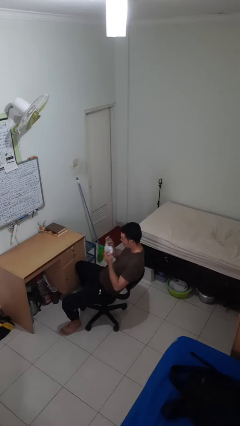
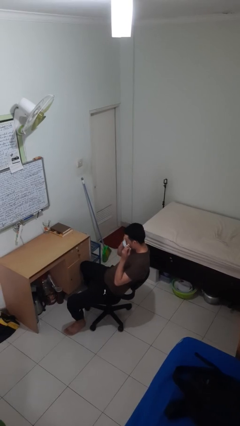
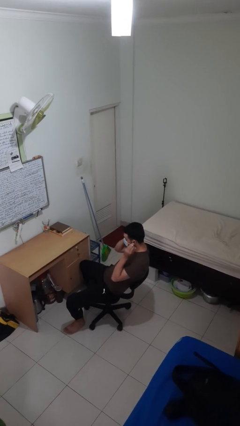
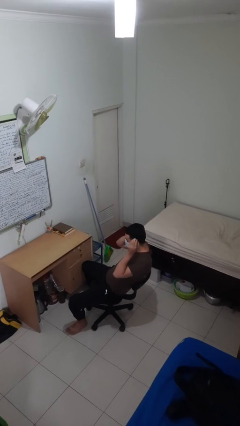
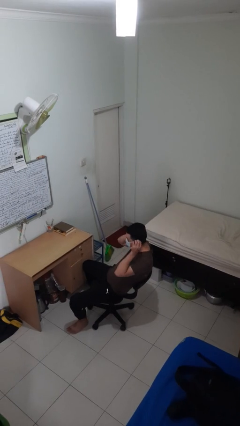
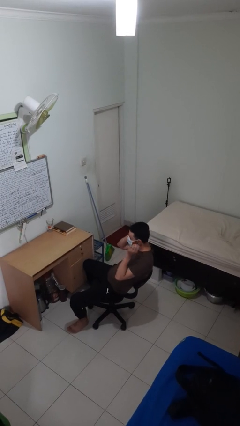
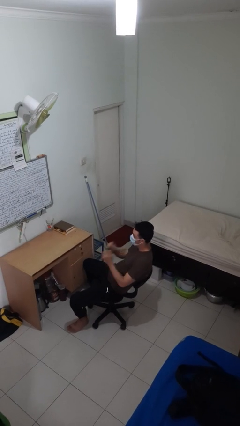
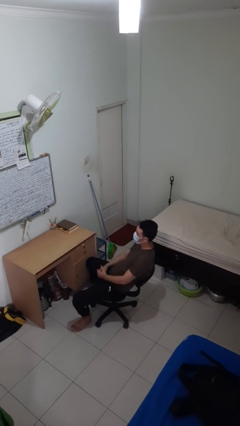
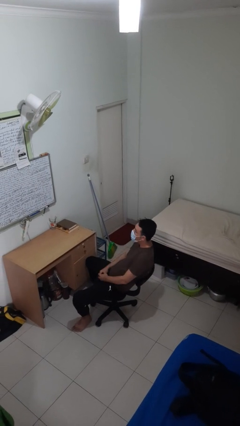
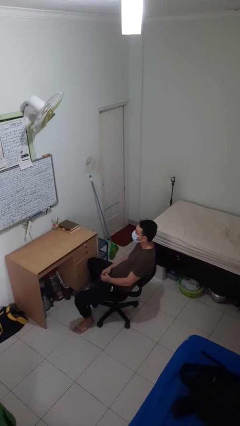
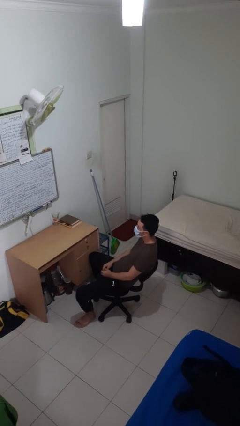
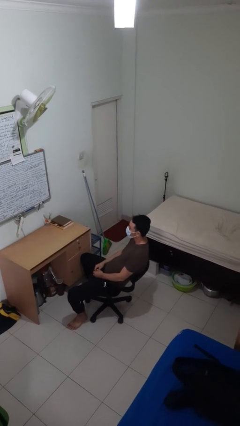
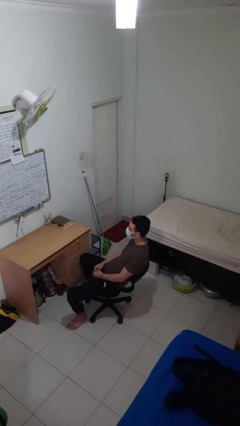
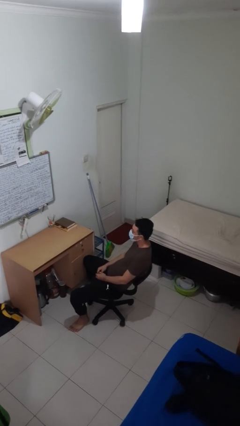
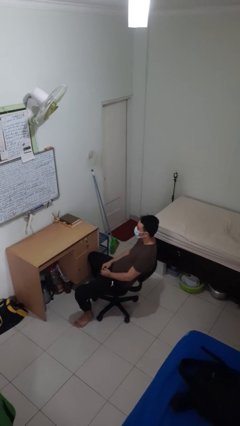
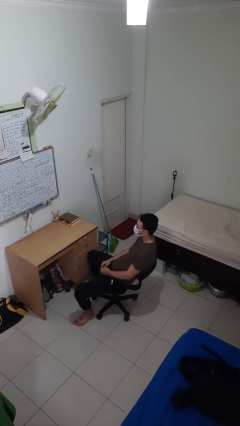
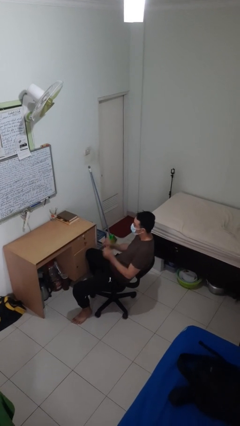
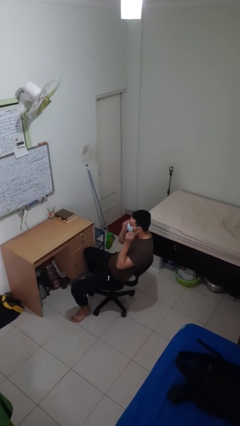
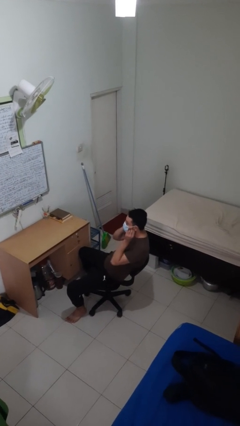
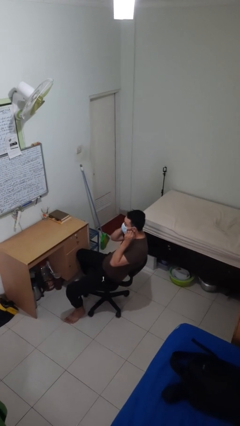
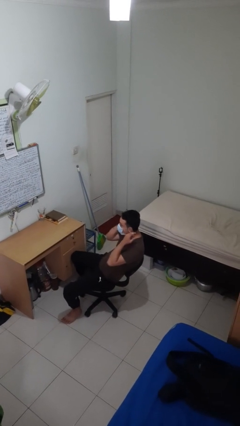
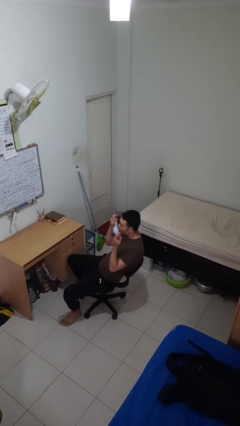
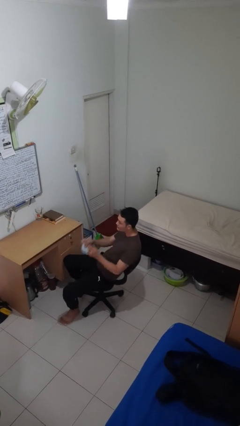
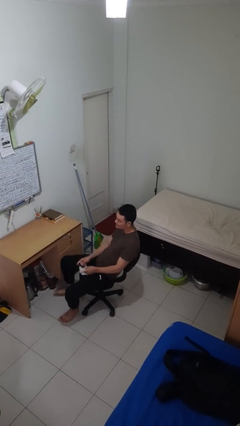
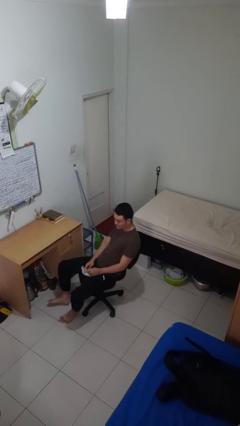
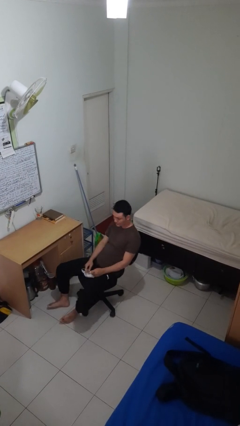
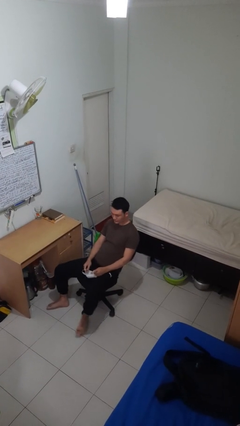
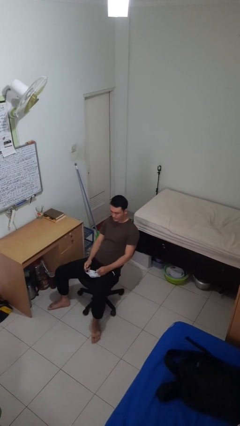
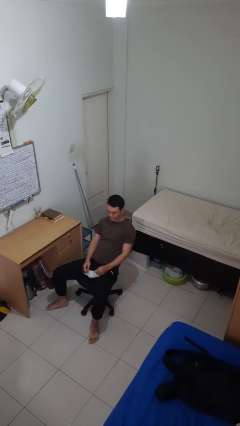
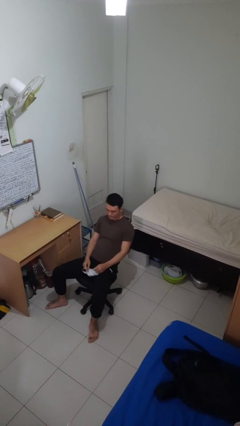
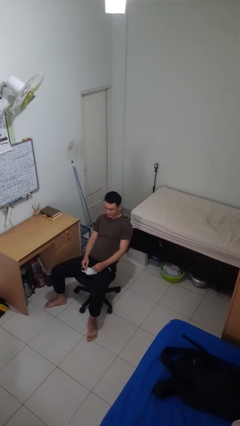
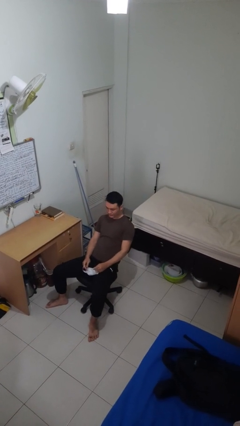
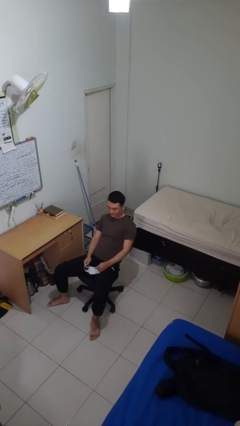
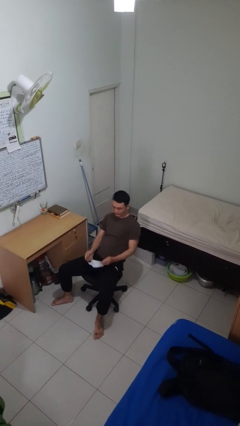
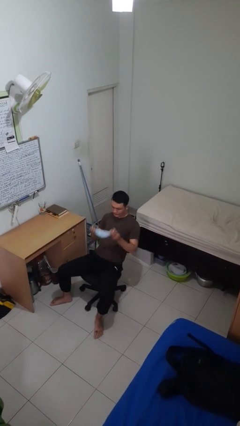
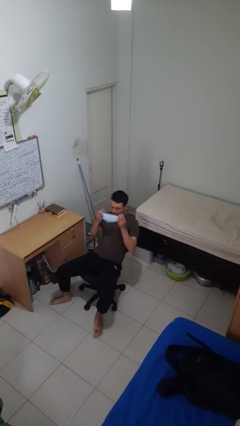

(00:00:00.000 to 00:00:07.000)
person puts on facemask

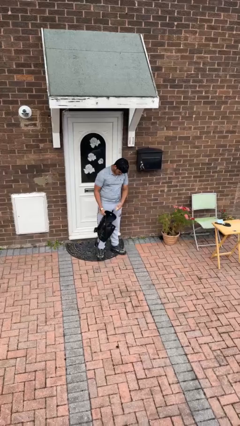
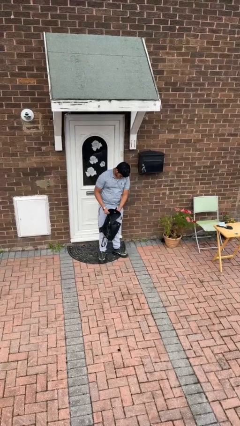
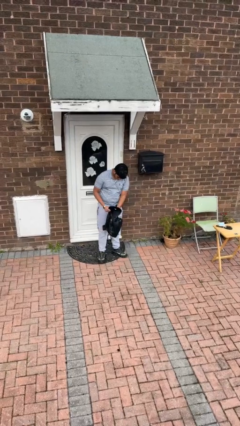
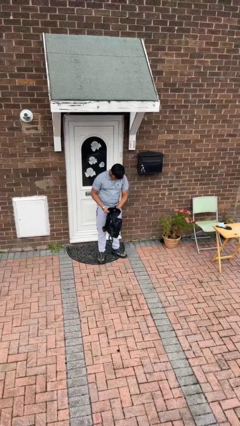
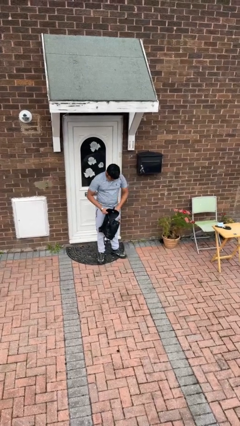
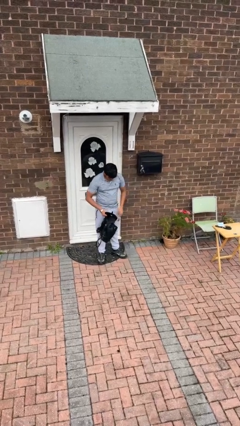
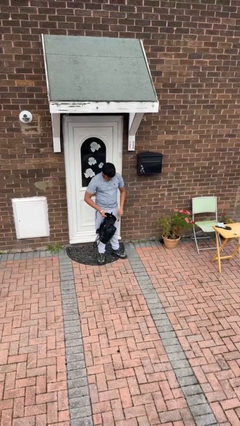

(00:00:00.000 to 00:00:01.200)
person puts object into backpack

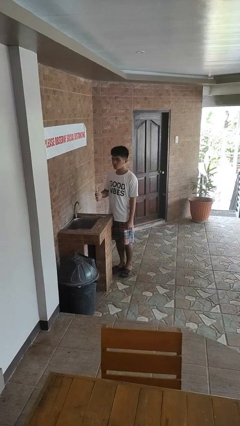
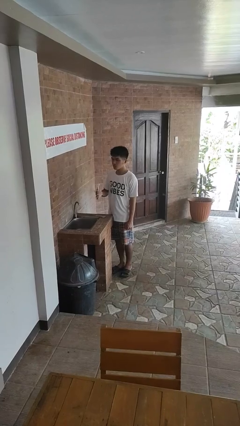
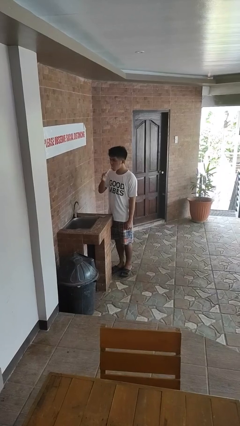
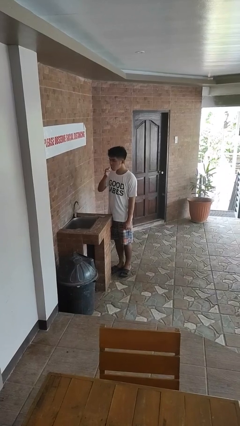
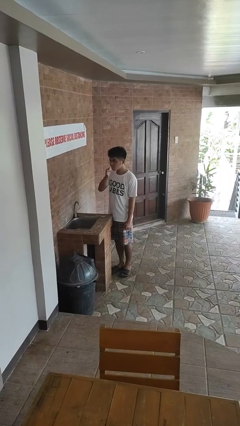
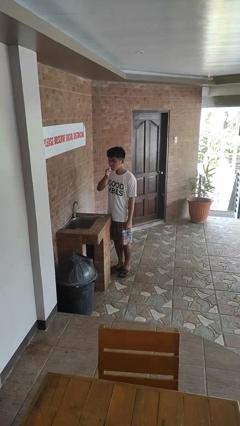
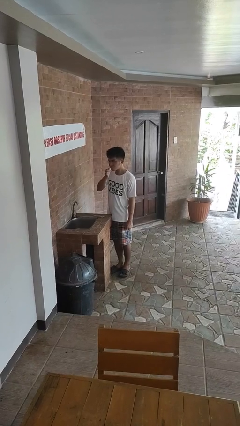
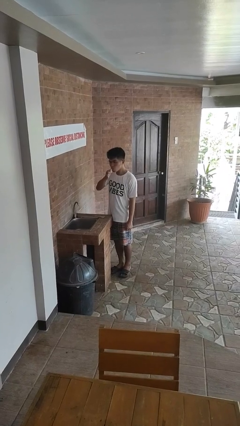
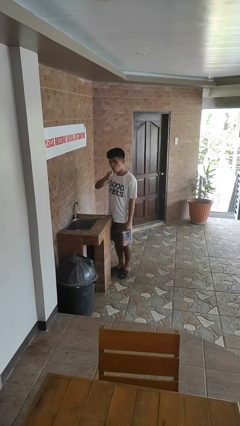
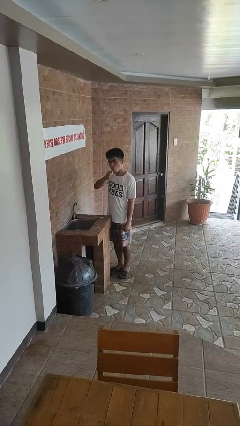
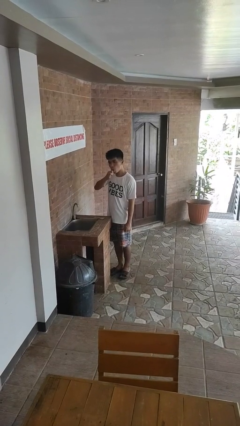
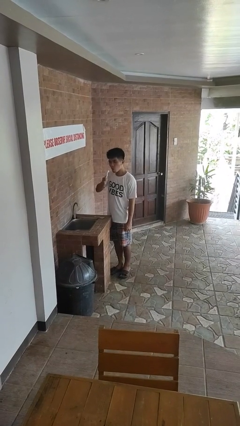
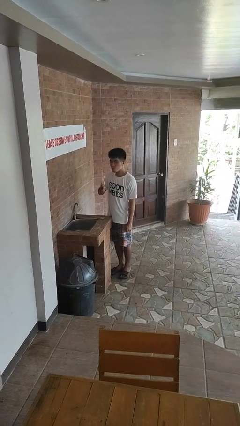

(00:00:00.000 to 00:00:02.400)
person brushes teeth

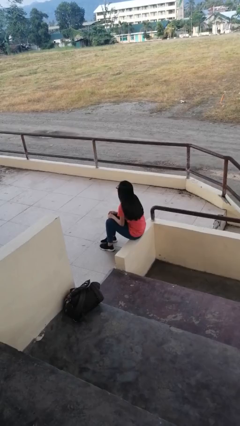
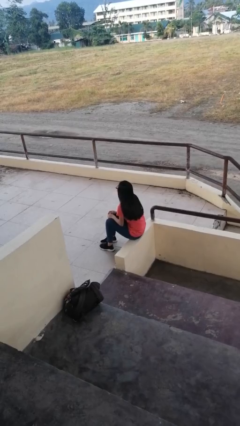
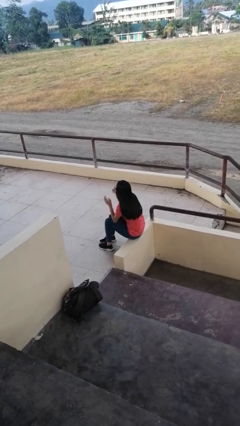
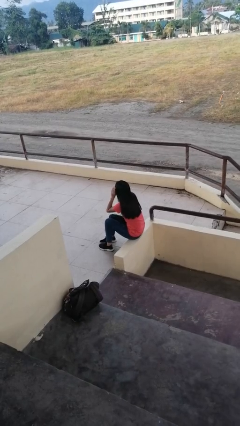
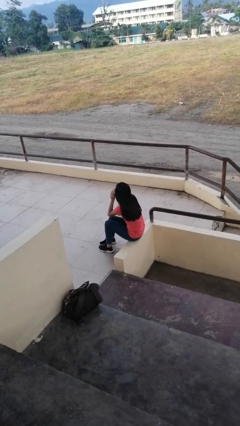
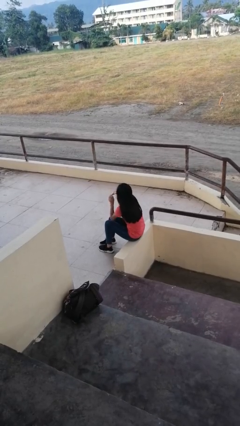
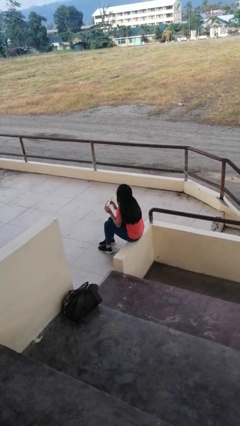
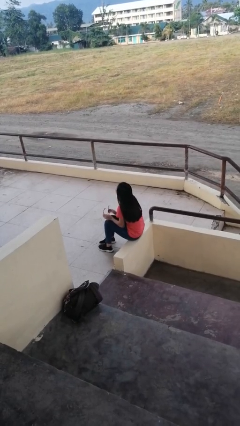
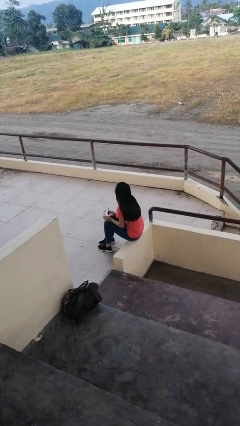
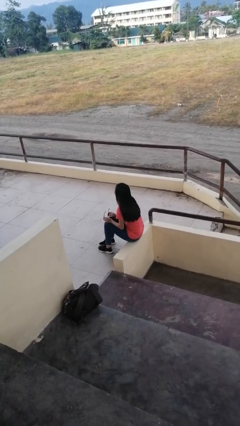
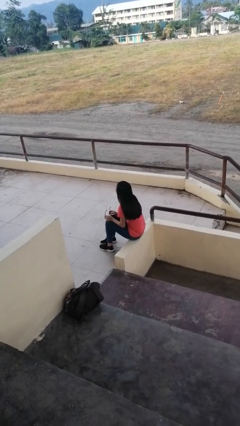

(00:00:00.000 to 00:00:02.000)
person takes off glasses

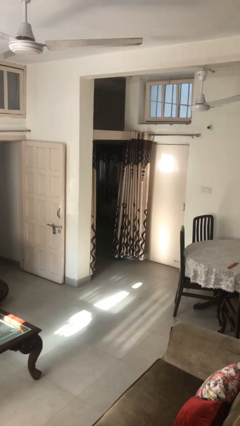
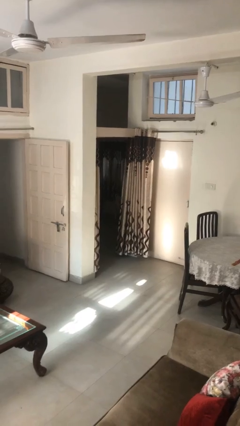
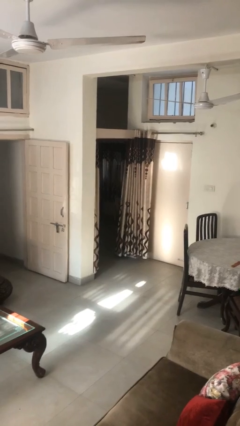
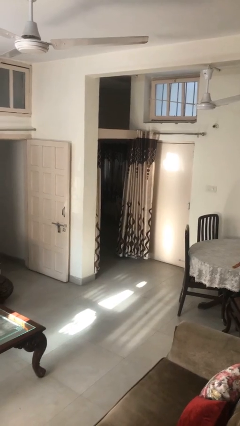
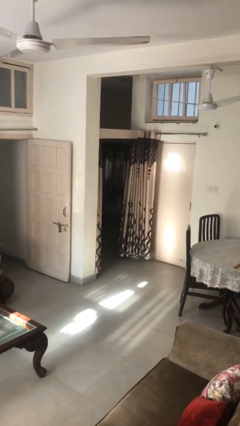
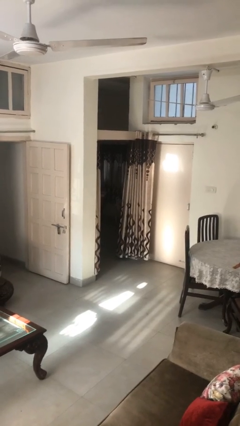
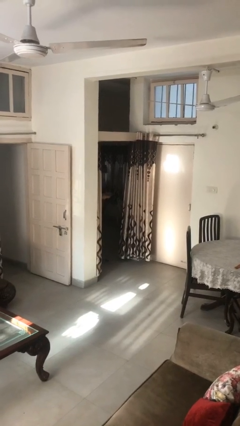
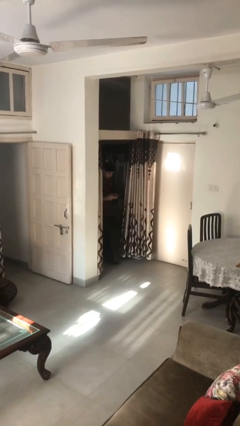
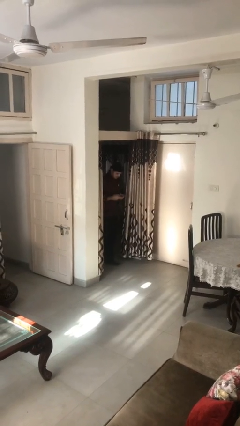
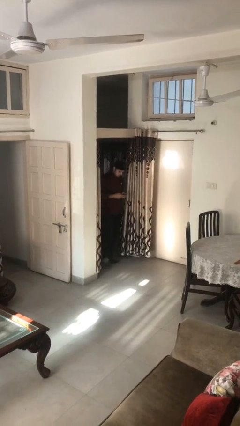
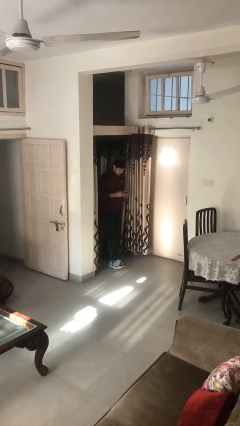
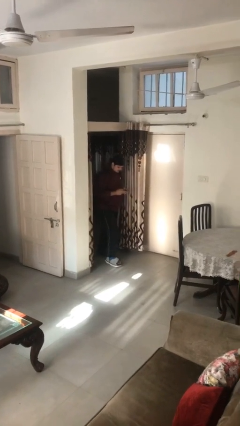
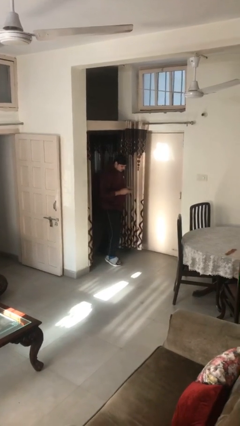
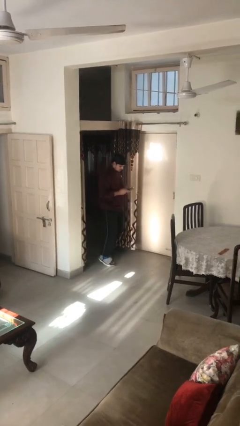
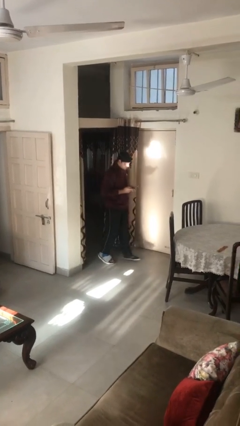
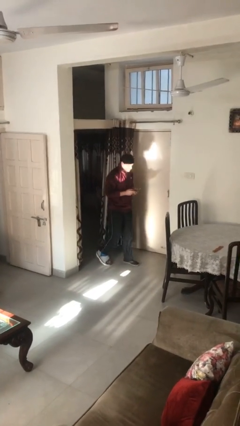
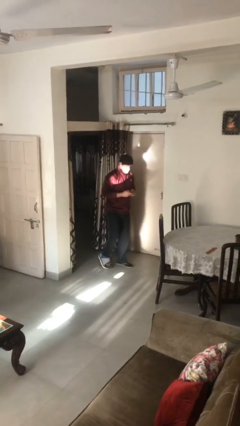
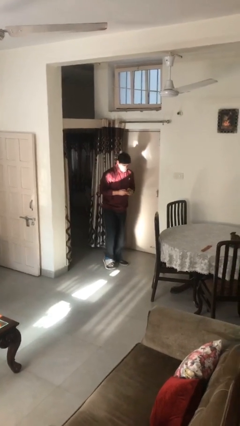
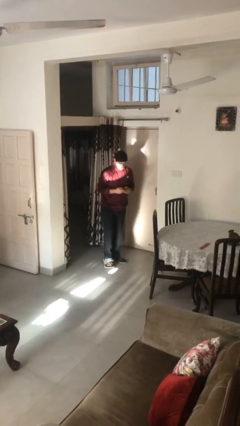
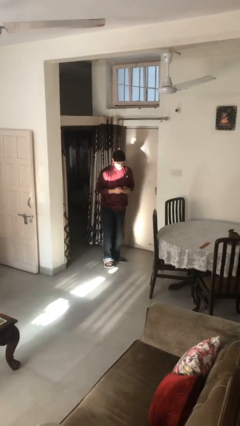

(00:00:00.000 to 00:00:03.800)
person enters scene through structure

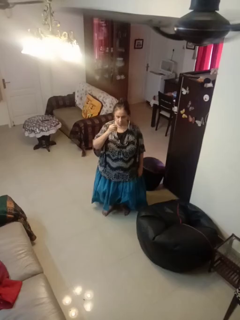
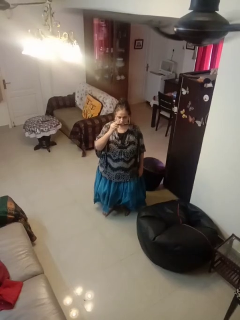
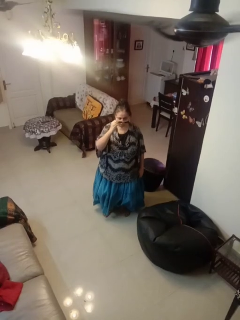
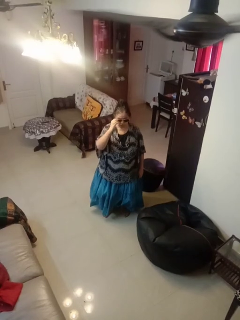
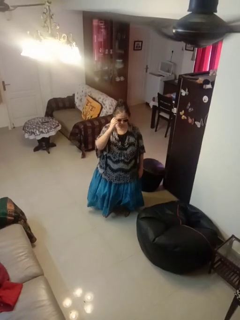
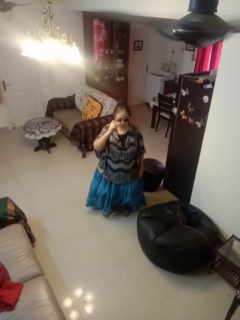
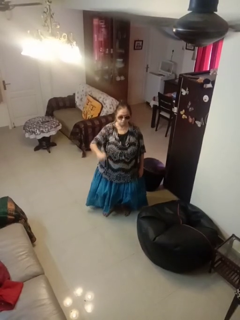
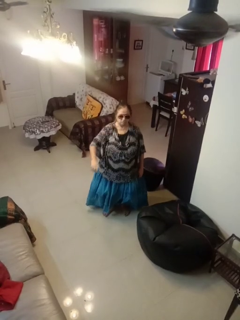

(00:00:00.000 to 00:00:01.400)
person puts on sunglasses
